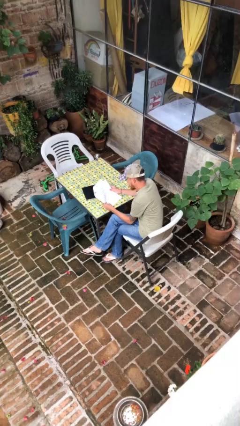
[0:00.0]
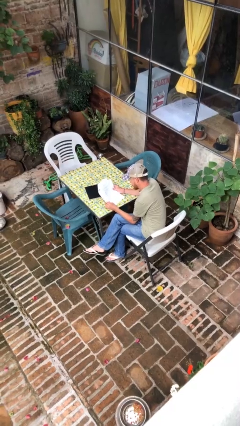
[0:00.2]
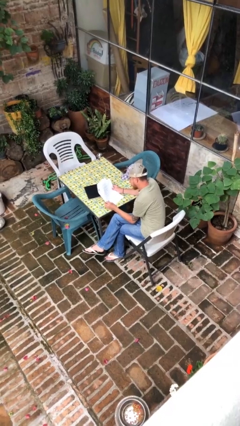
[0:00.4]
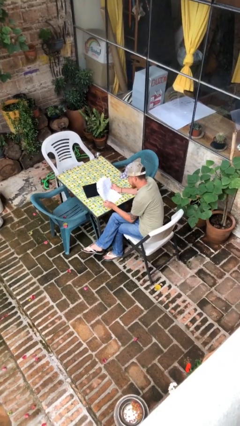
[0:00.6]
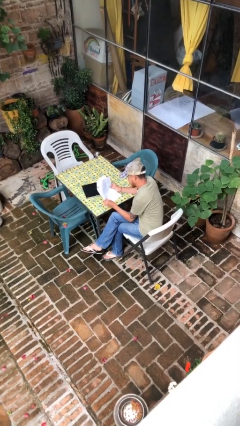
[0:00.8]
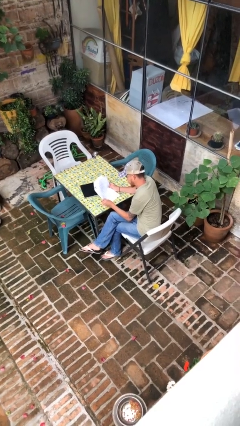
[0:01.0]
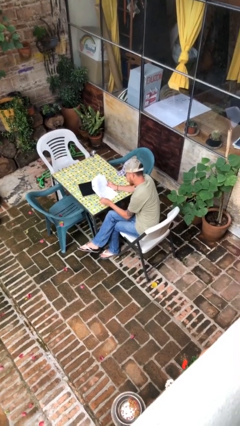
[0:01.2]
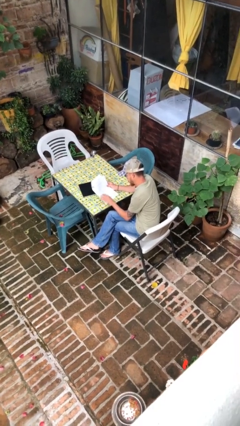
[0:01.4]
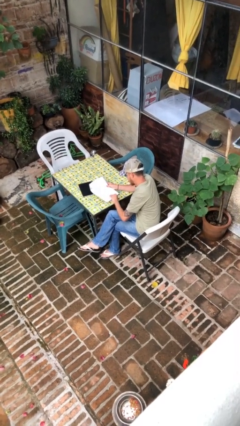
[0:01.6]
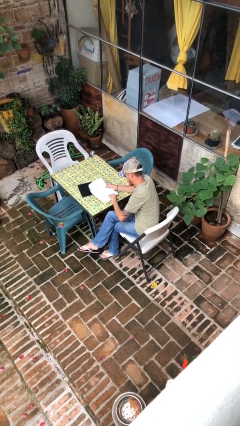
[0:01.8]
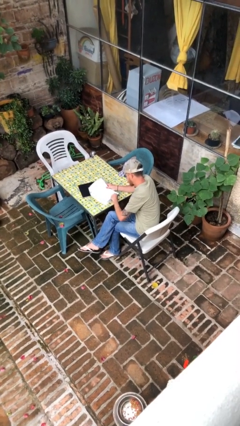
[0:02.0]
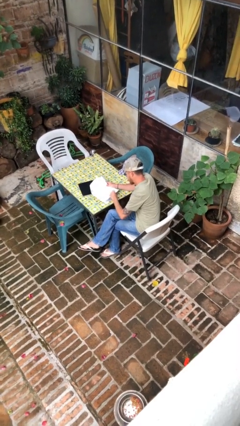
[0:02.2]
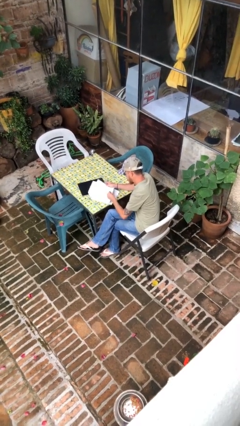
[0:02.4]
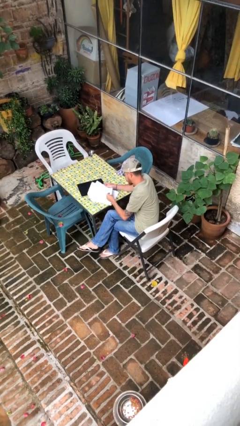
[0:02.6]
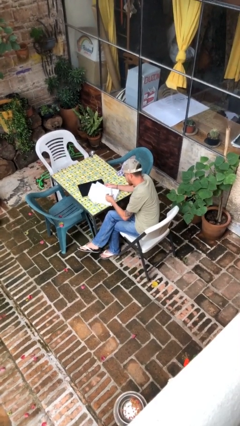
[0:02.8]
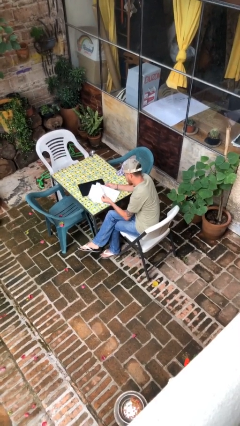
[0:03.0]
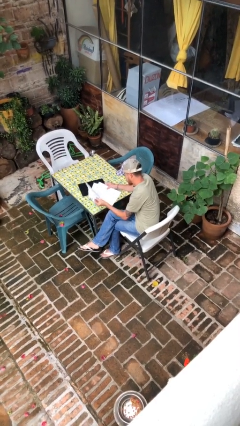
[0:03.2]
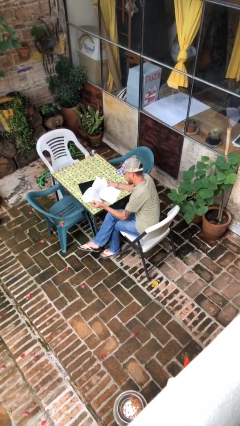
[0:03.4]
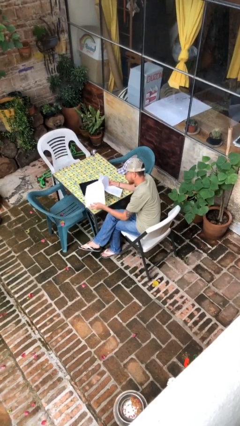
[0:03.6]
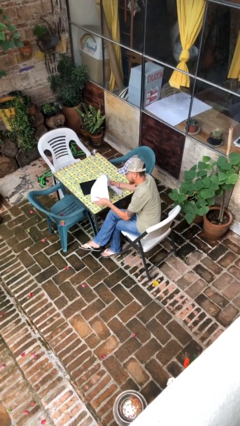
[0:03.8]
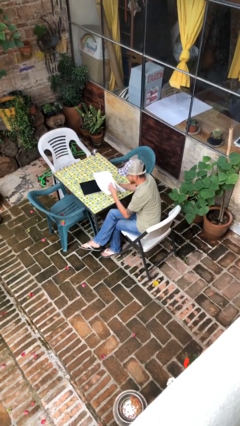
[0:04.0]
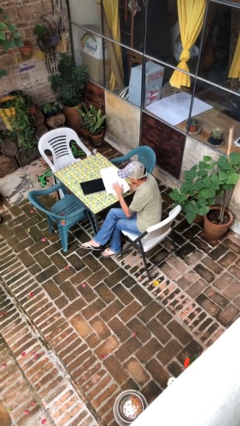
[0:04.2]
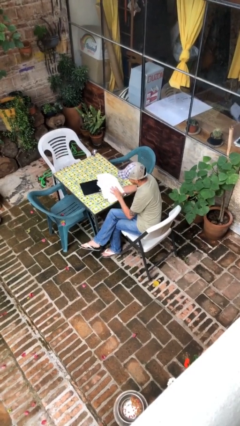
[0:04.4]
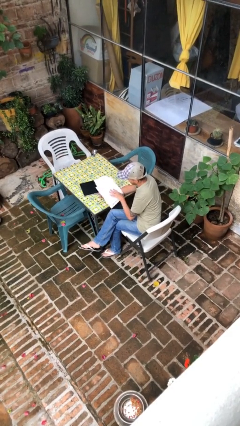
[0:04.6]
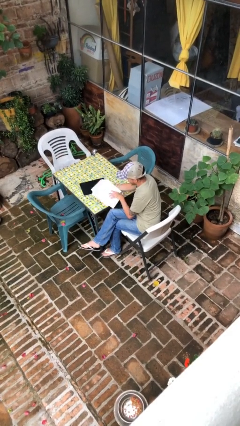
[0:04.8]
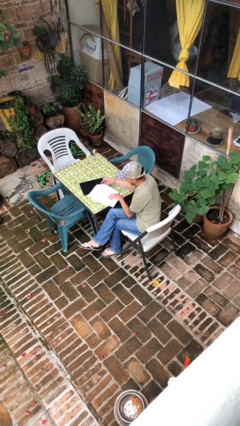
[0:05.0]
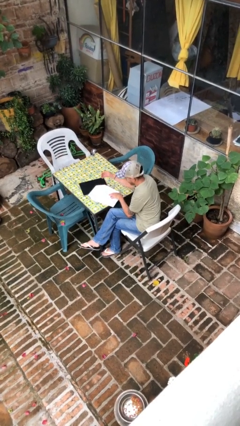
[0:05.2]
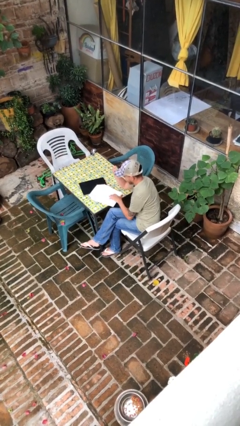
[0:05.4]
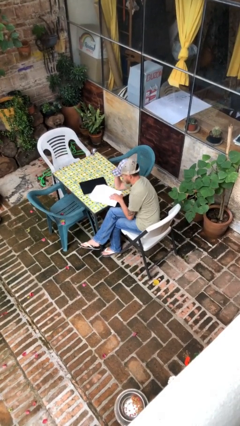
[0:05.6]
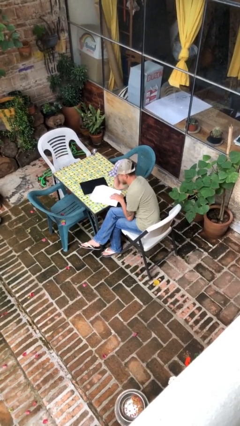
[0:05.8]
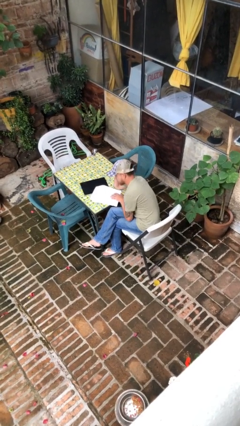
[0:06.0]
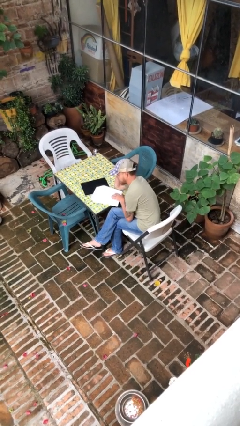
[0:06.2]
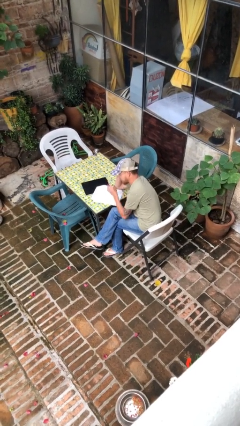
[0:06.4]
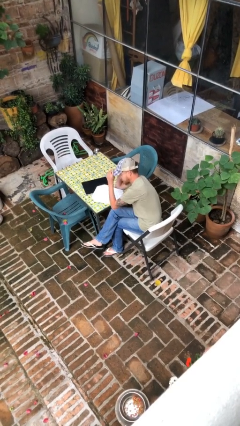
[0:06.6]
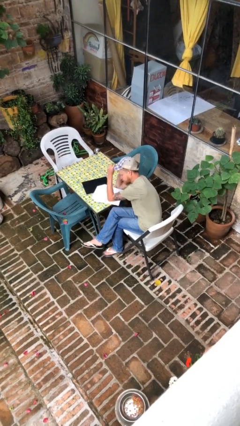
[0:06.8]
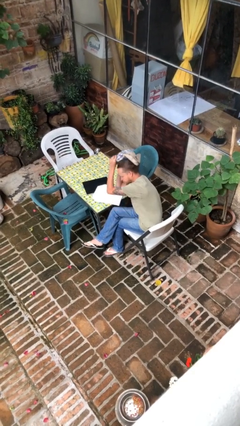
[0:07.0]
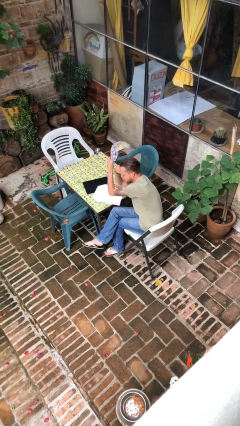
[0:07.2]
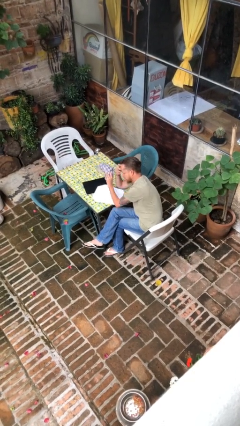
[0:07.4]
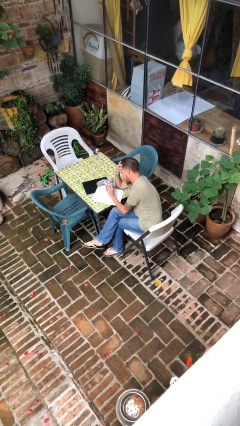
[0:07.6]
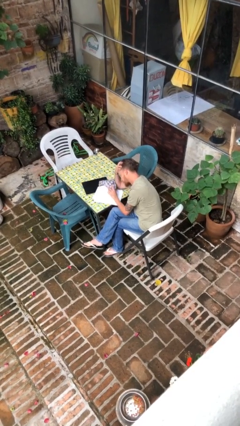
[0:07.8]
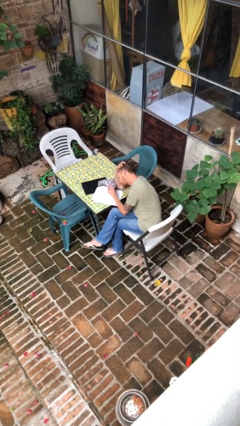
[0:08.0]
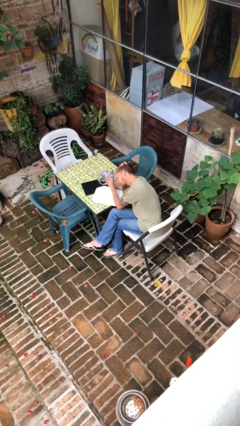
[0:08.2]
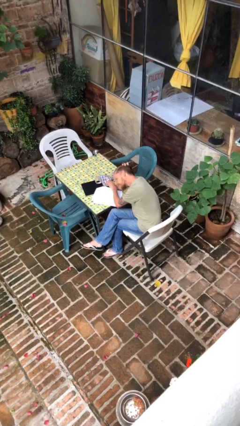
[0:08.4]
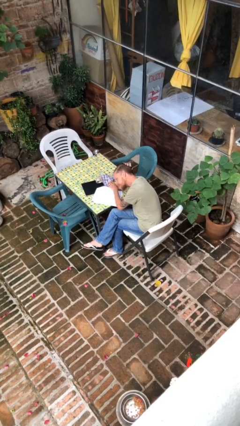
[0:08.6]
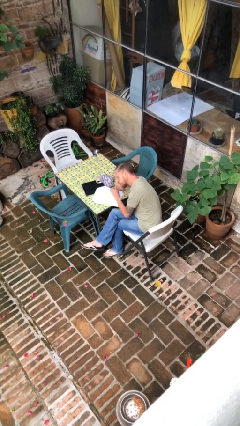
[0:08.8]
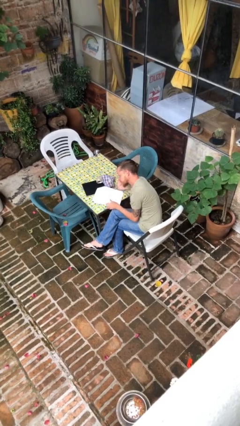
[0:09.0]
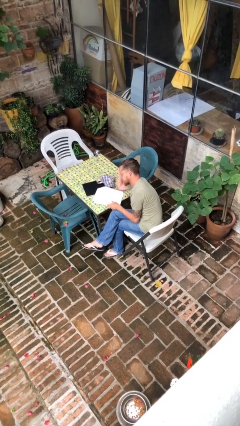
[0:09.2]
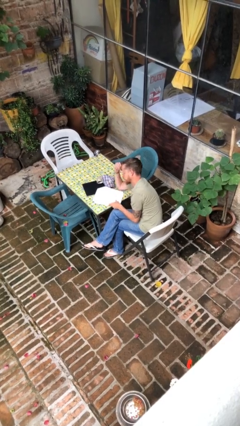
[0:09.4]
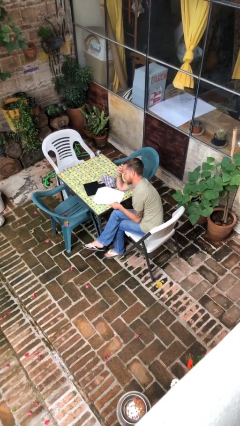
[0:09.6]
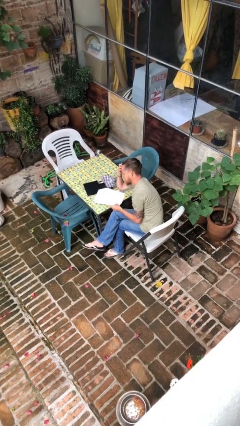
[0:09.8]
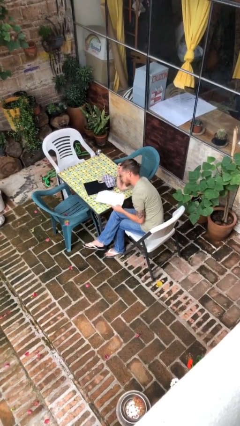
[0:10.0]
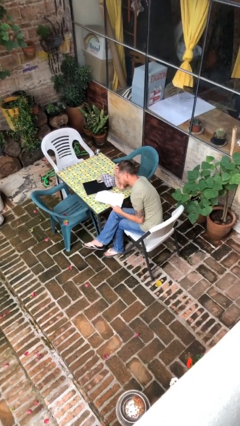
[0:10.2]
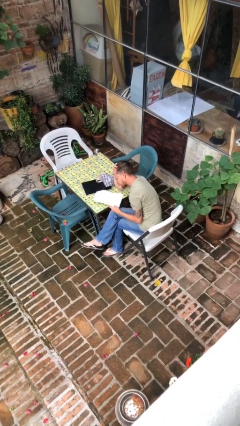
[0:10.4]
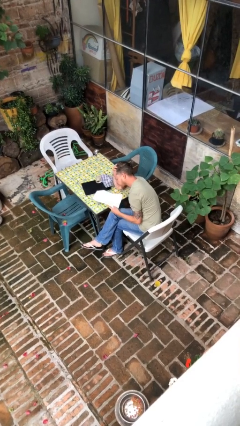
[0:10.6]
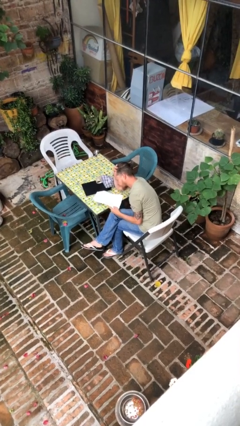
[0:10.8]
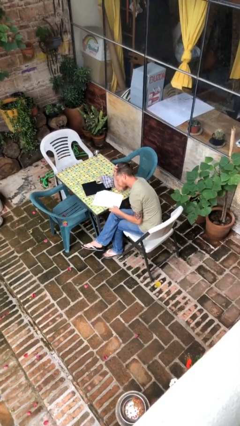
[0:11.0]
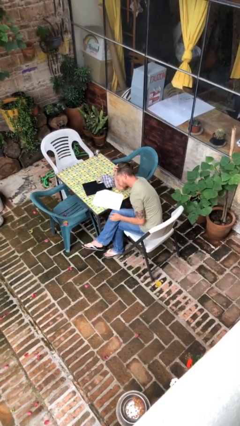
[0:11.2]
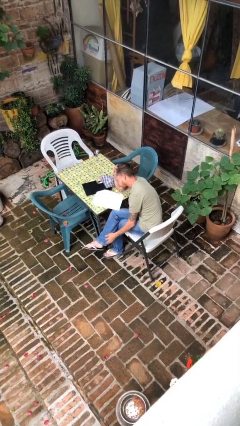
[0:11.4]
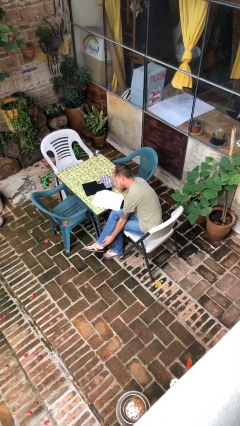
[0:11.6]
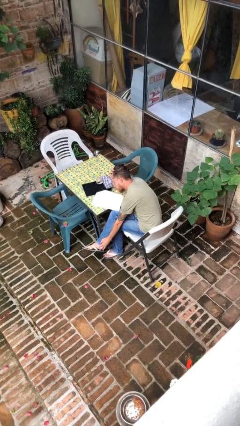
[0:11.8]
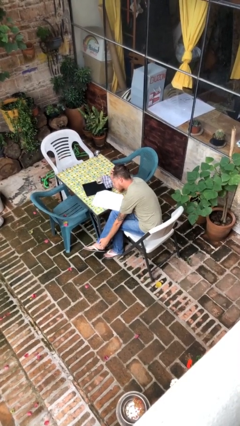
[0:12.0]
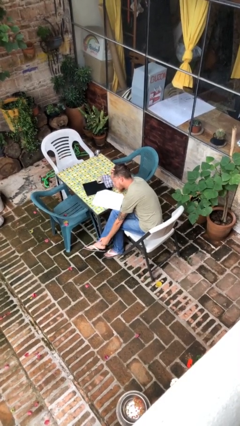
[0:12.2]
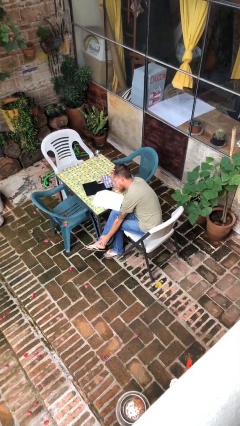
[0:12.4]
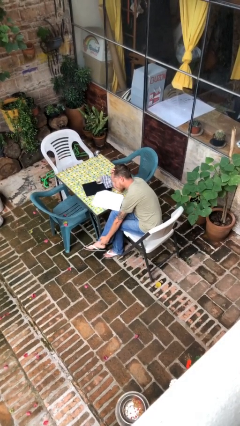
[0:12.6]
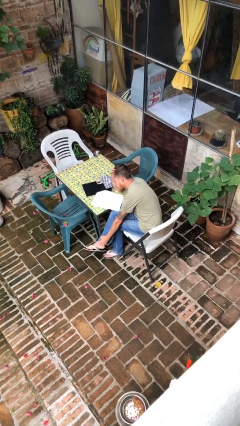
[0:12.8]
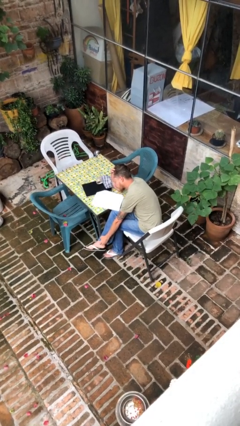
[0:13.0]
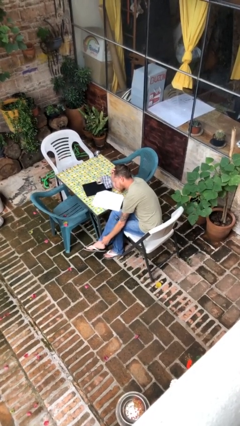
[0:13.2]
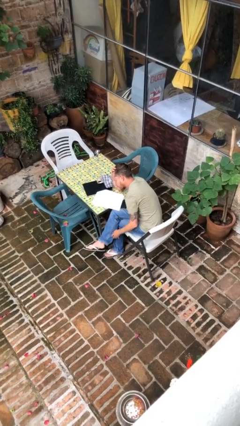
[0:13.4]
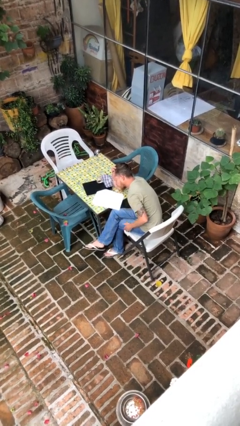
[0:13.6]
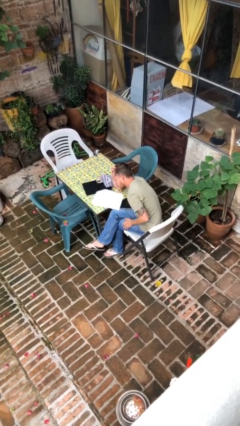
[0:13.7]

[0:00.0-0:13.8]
person reads document

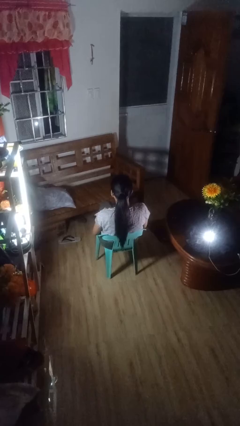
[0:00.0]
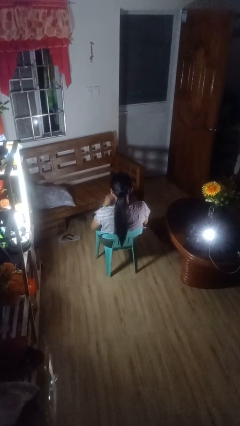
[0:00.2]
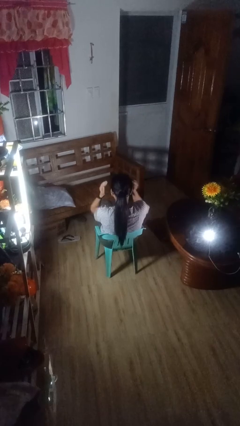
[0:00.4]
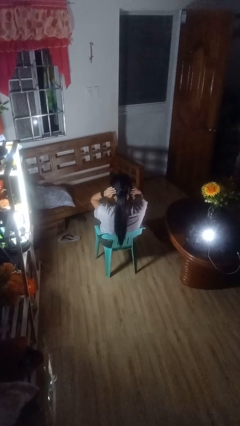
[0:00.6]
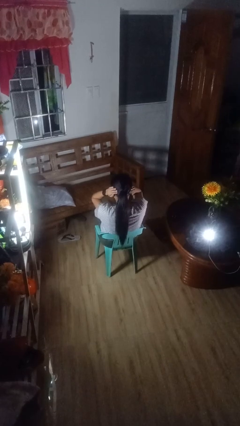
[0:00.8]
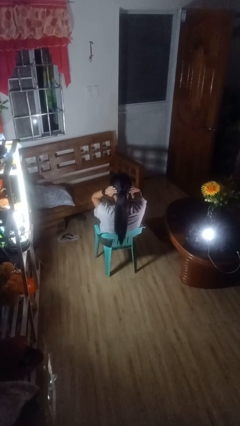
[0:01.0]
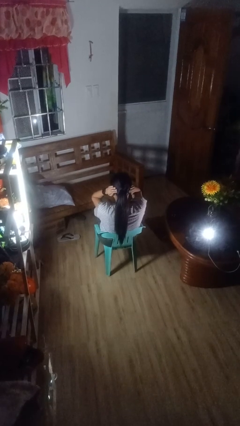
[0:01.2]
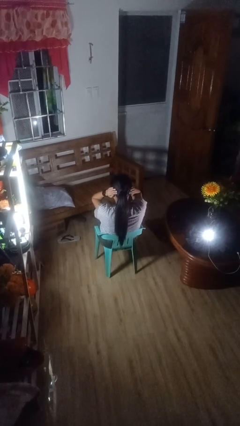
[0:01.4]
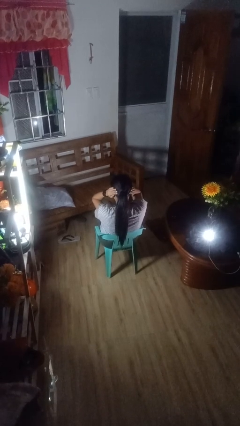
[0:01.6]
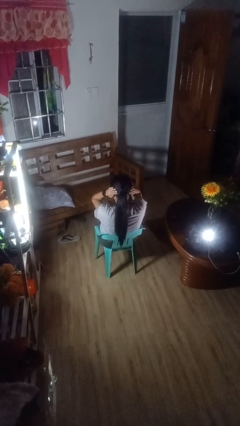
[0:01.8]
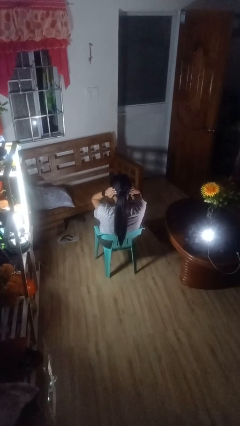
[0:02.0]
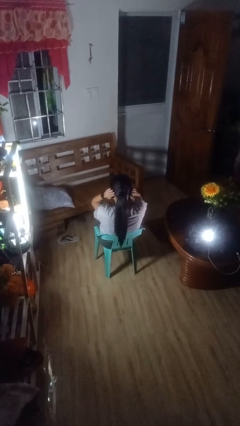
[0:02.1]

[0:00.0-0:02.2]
person puts fingers in ear

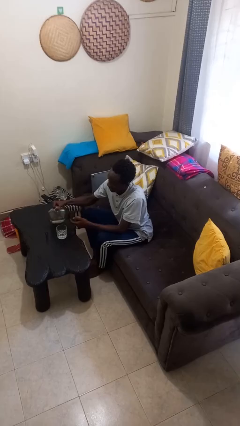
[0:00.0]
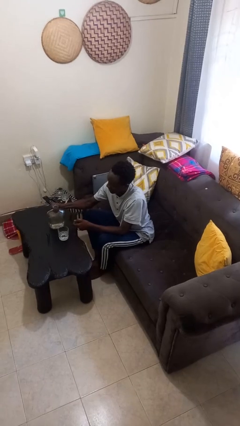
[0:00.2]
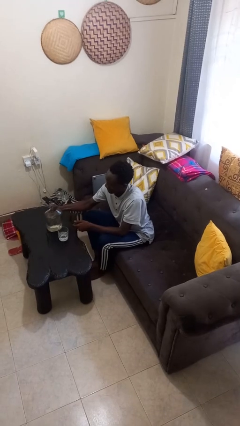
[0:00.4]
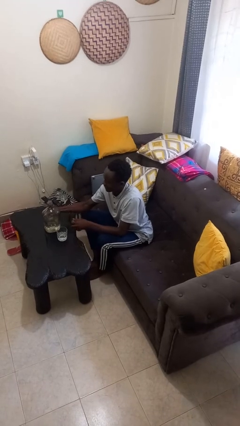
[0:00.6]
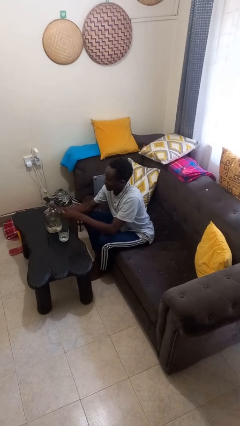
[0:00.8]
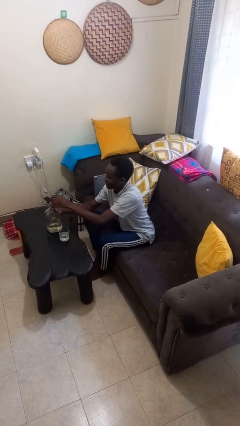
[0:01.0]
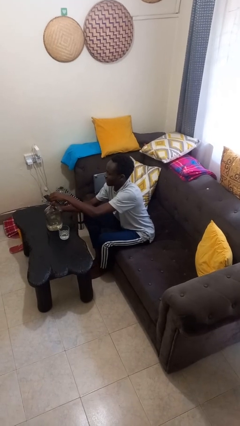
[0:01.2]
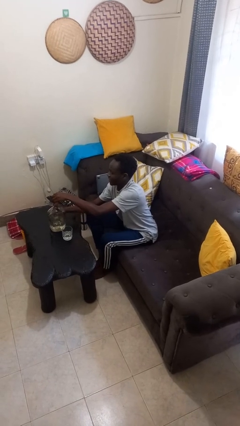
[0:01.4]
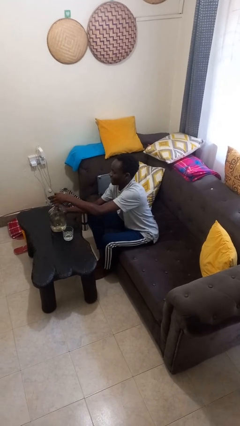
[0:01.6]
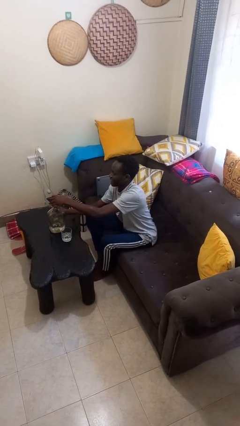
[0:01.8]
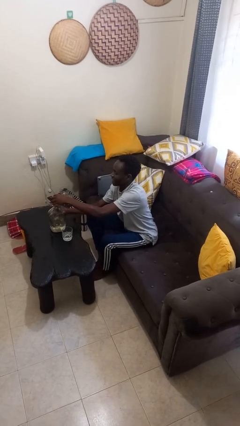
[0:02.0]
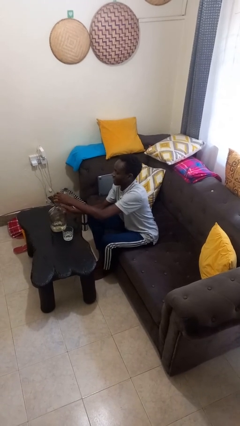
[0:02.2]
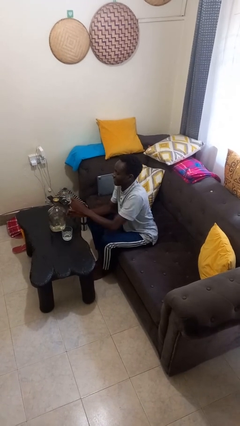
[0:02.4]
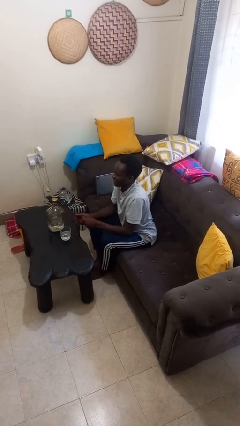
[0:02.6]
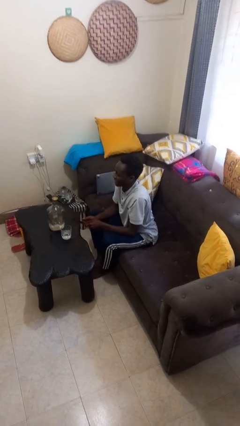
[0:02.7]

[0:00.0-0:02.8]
person screws lid to bottle
